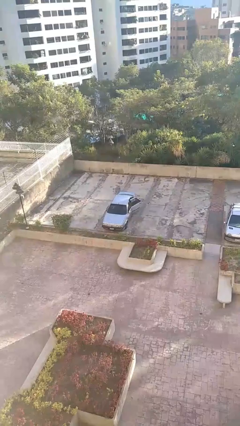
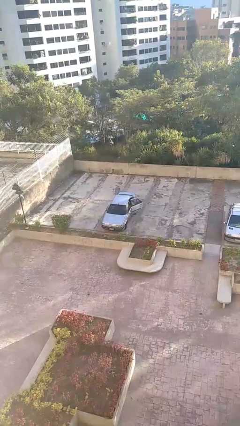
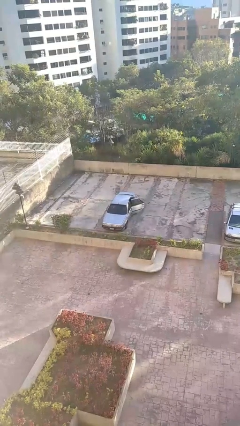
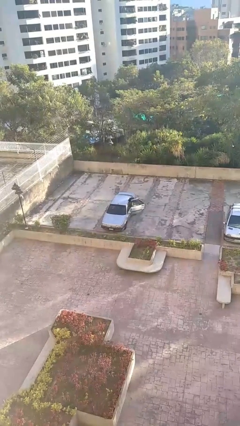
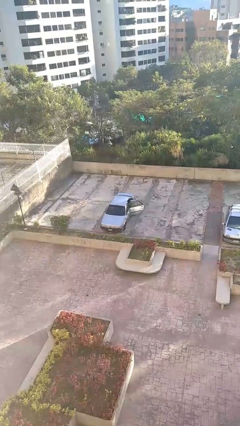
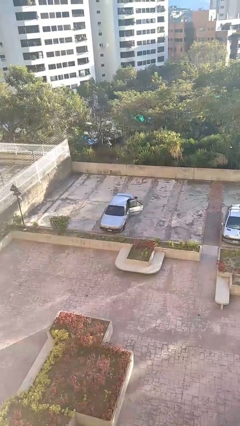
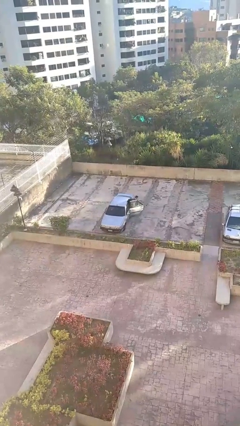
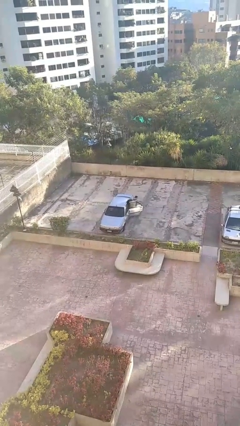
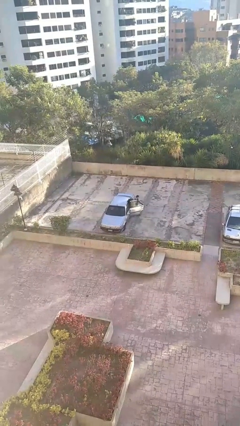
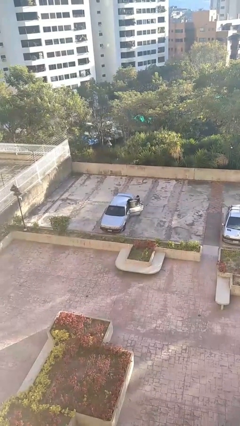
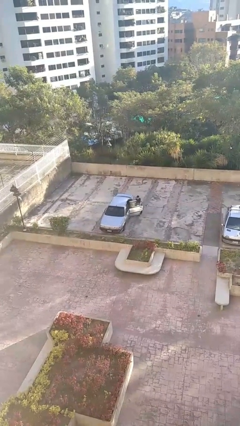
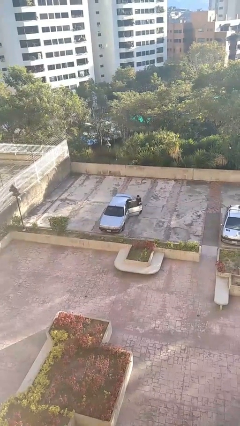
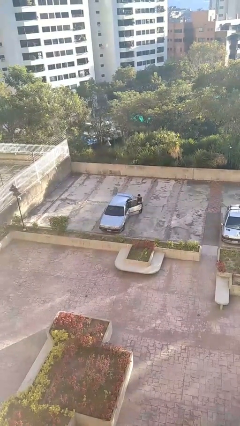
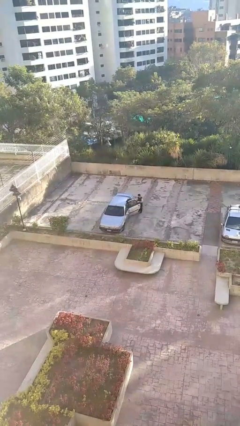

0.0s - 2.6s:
car drops off person

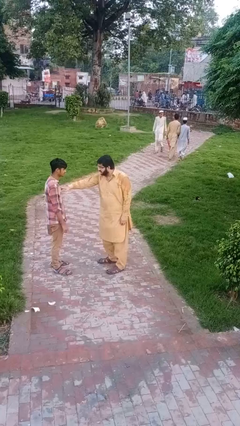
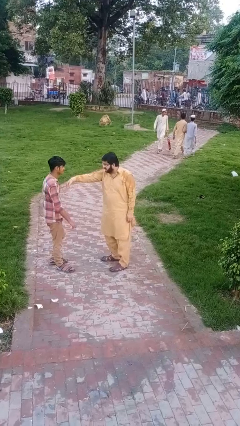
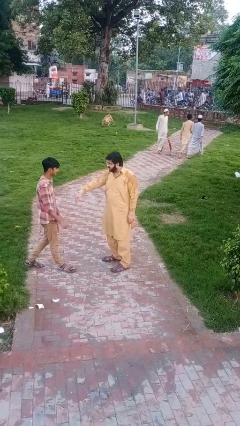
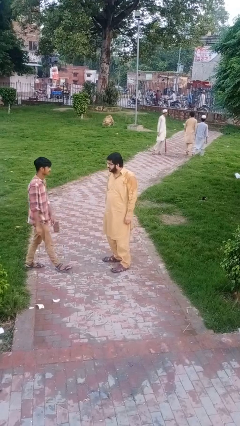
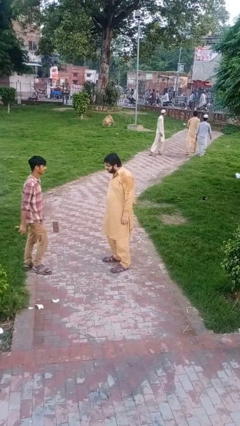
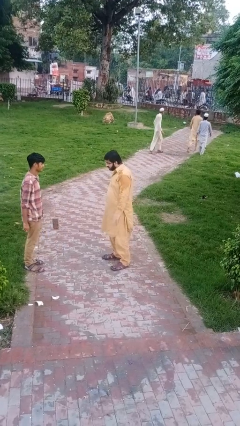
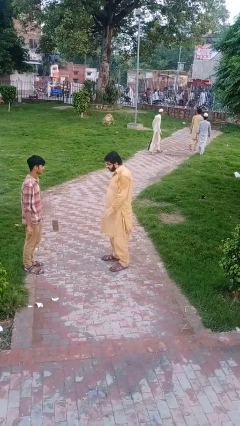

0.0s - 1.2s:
person shoves person

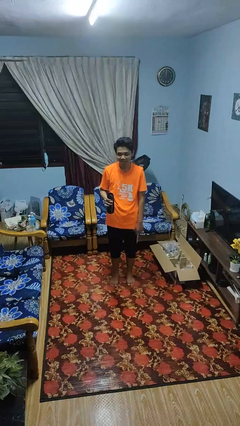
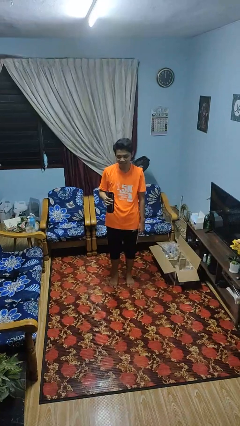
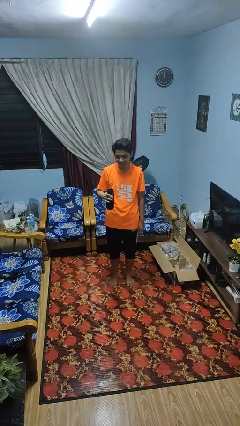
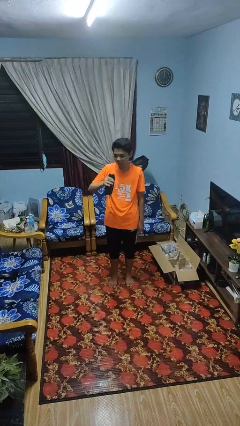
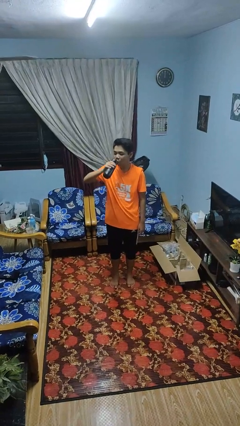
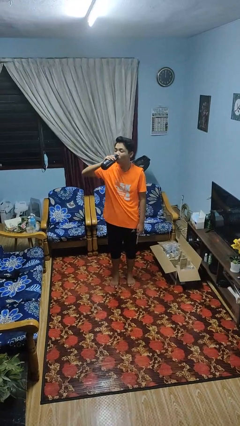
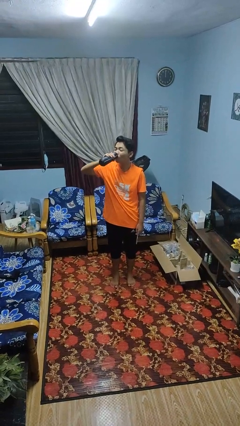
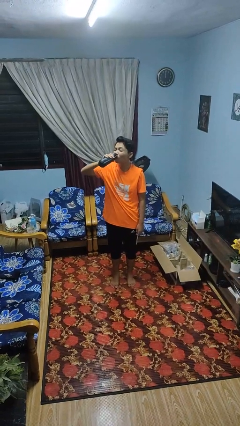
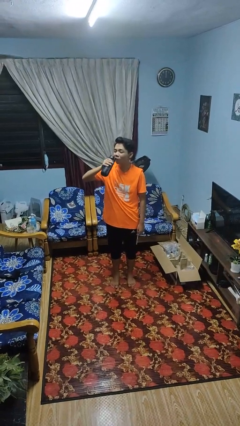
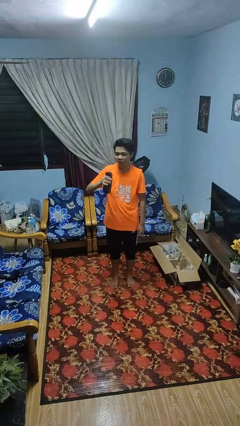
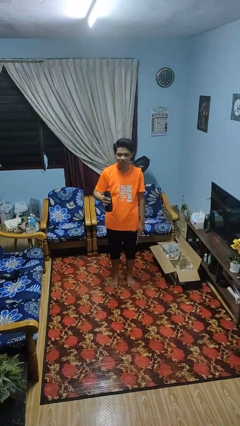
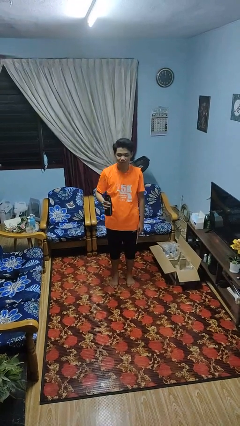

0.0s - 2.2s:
person drinks from bottle

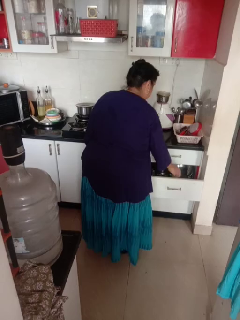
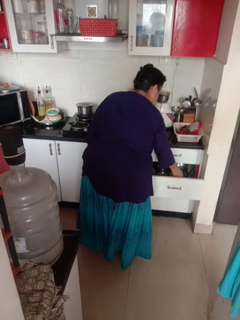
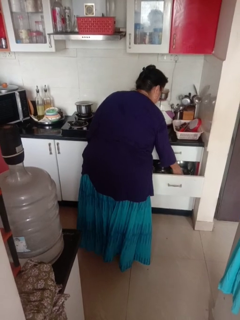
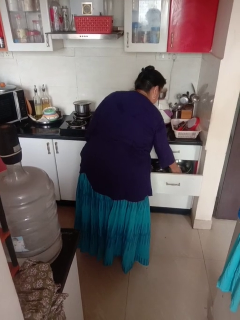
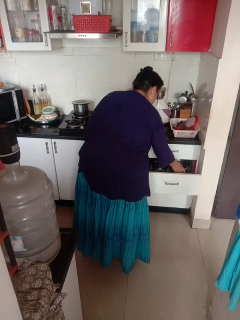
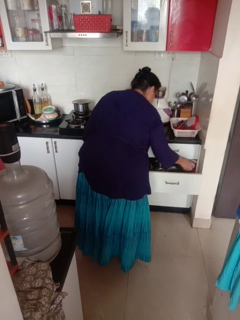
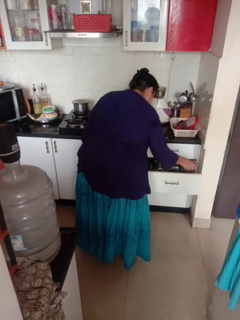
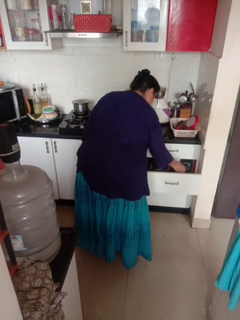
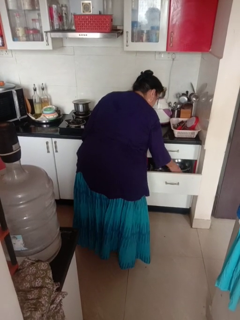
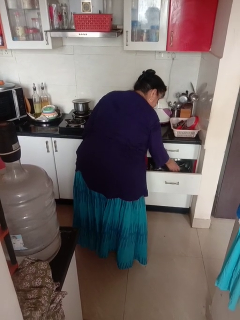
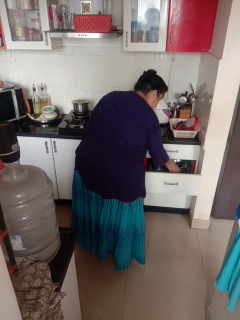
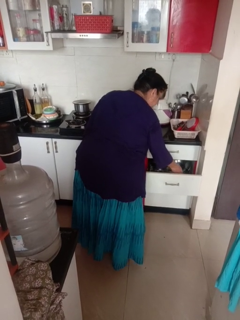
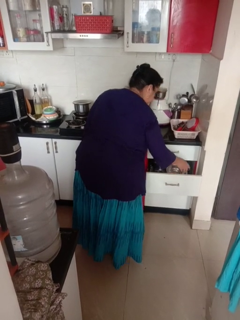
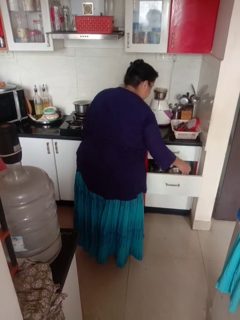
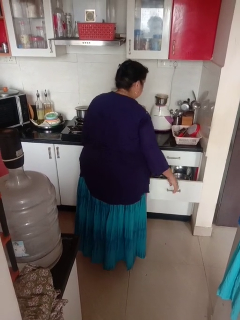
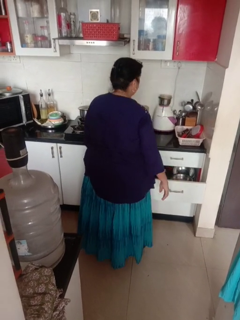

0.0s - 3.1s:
person searches in kitchen drawer

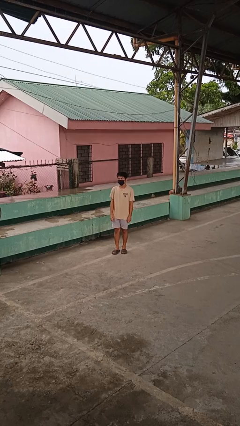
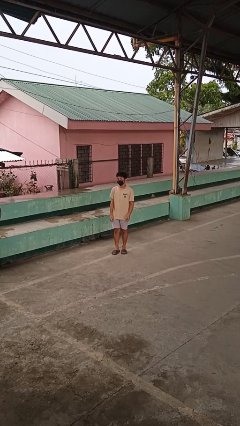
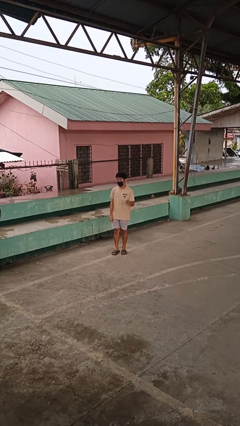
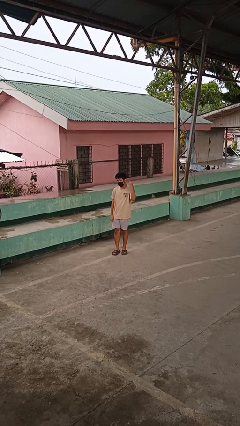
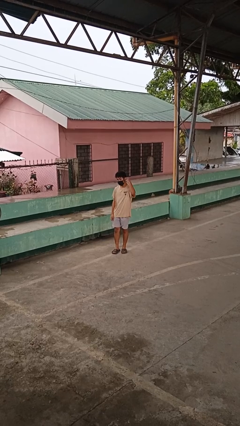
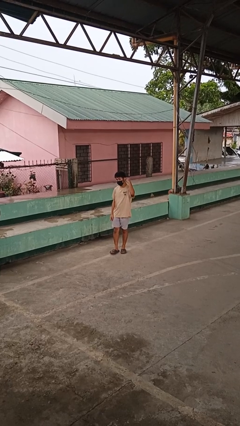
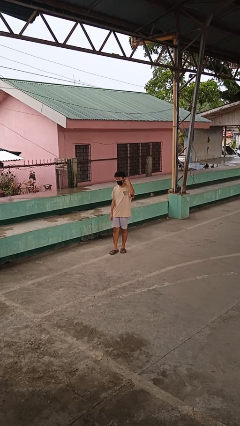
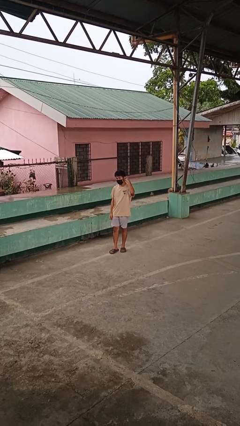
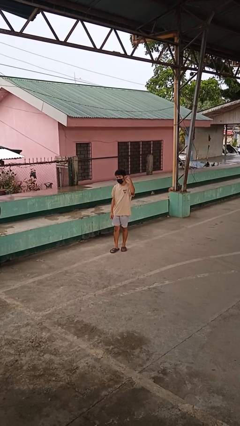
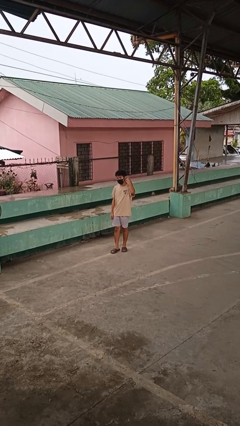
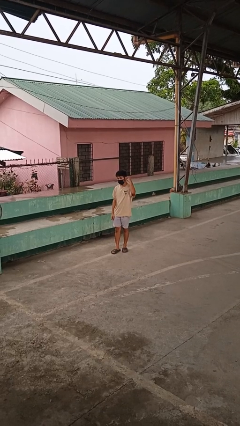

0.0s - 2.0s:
person gestures listen closely

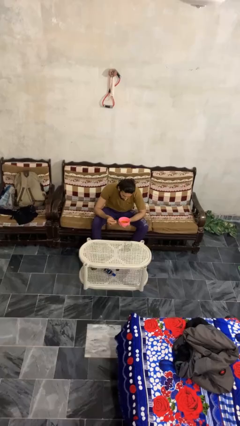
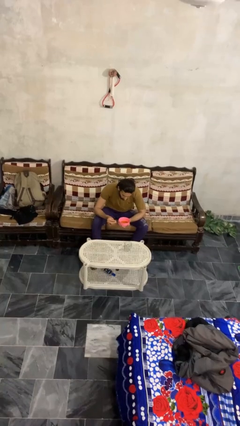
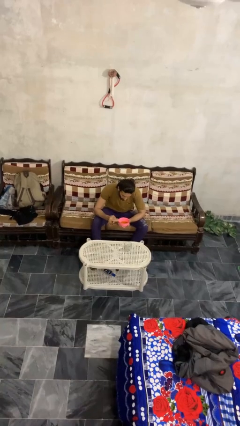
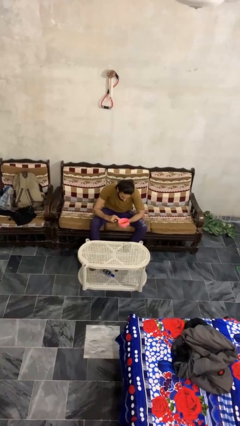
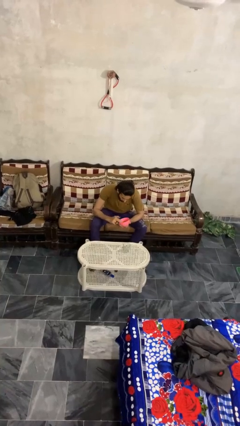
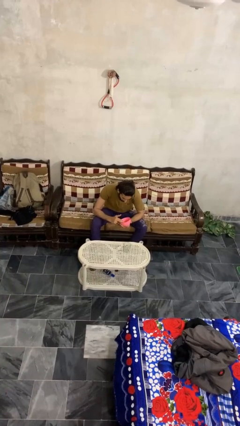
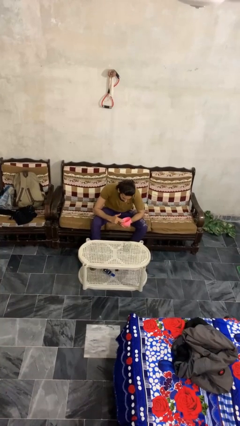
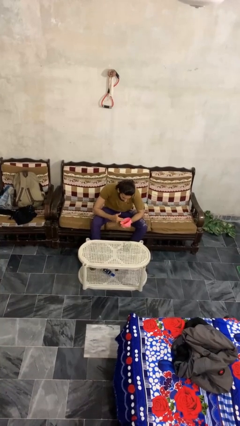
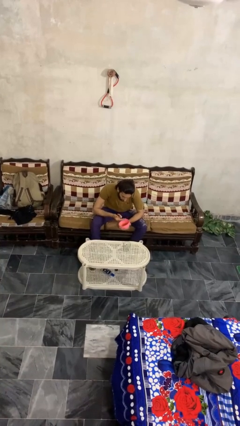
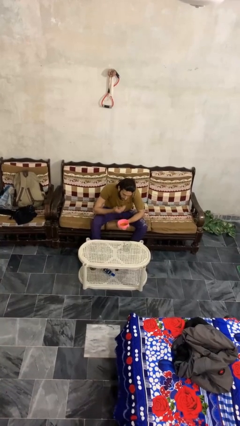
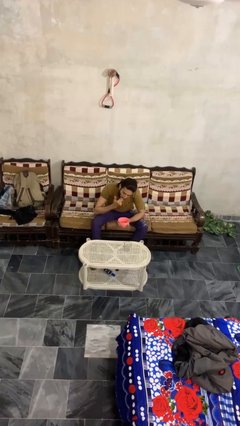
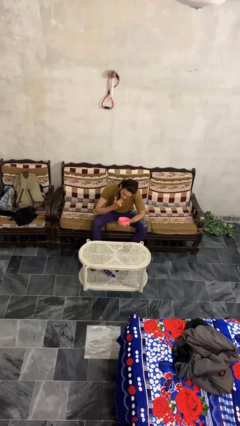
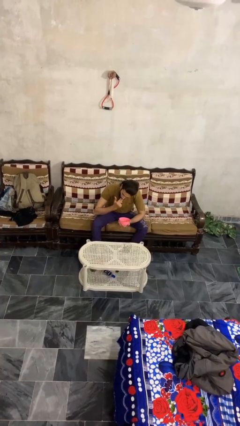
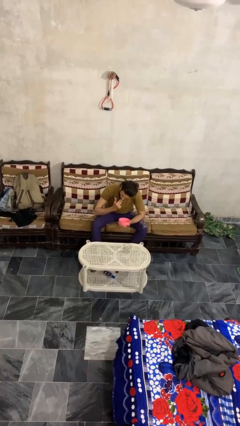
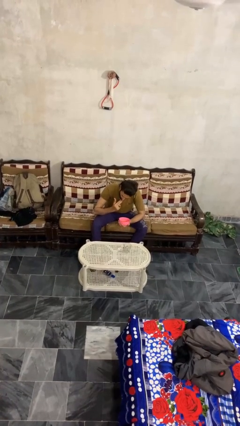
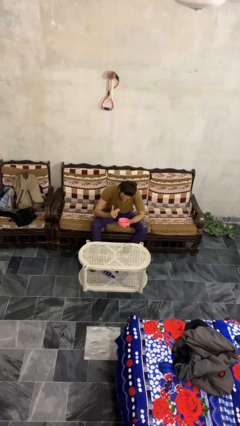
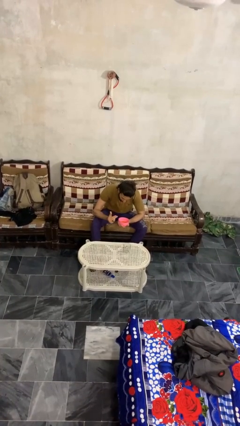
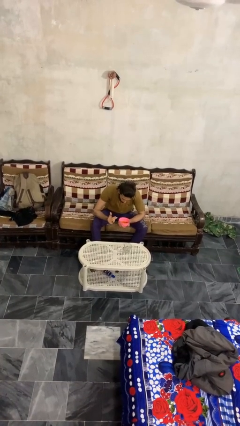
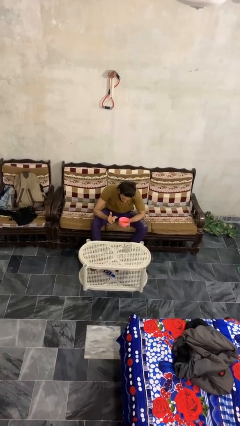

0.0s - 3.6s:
person eats with hands

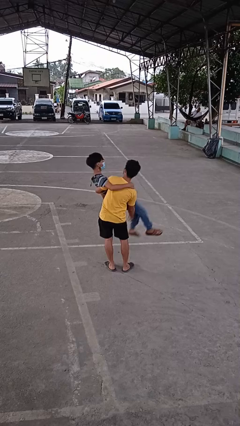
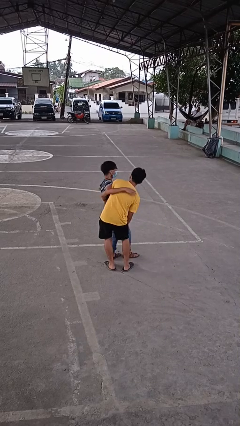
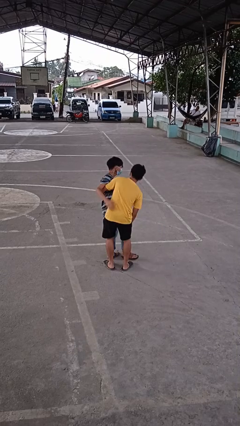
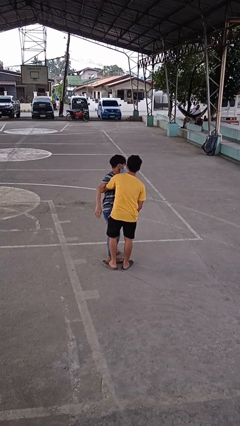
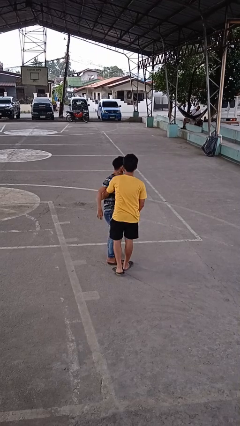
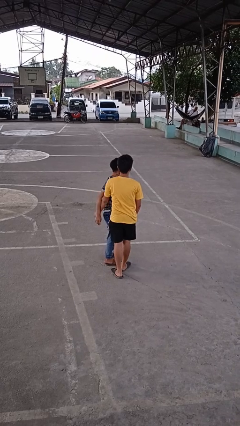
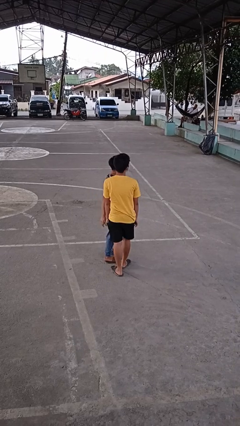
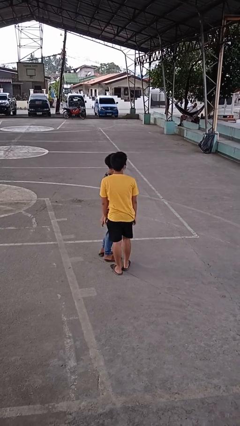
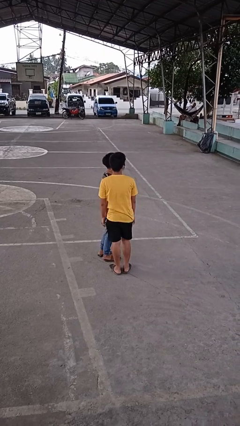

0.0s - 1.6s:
person puts down person

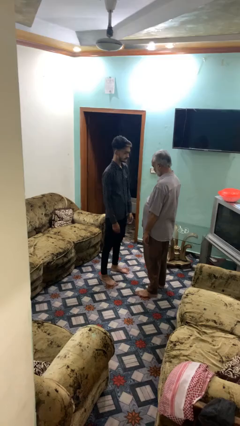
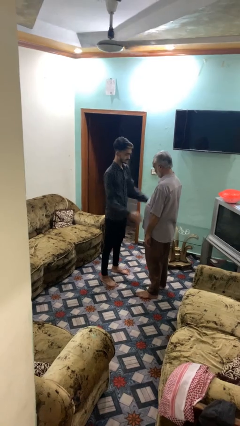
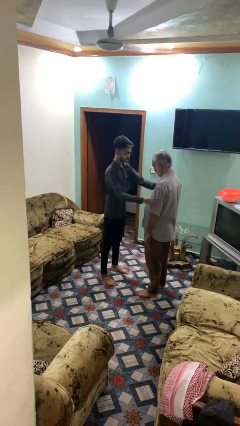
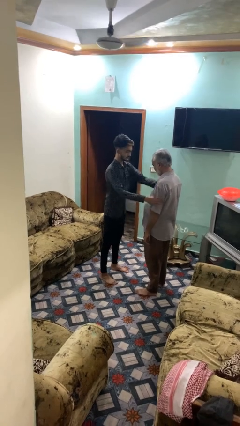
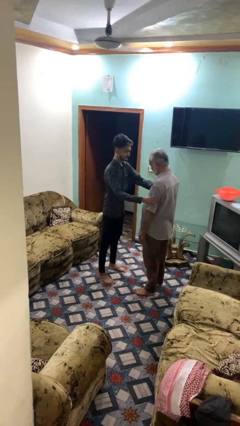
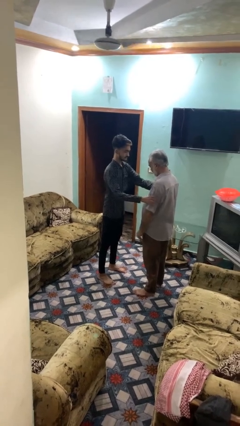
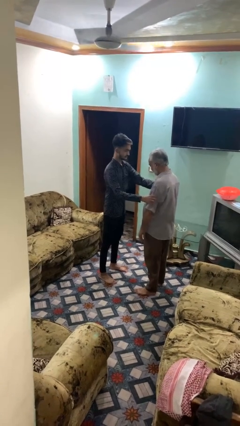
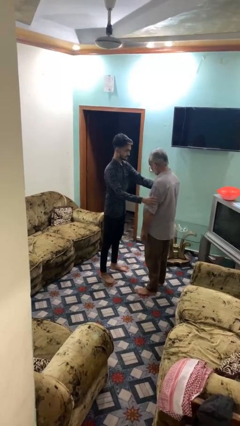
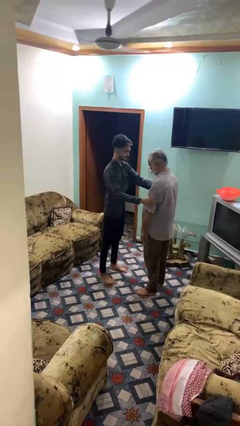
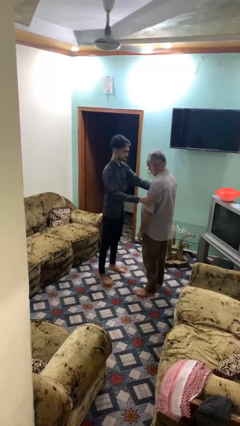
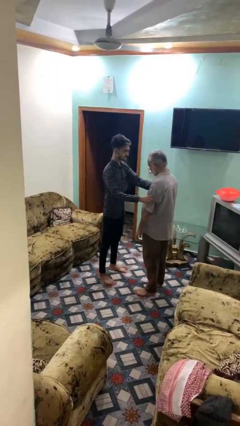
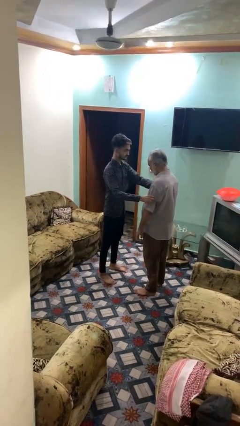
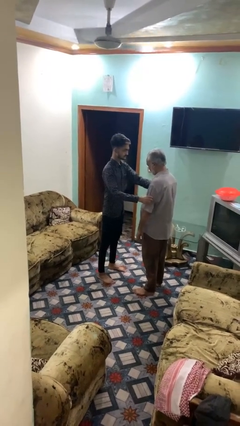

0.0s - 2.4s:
person grabs person by bicep
